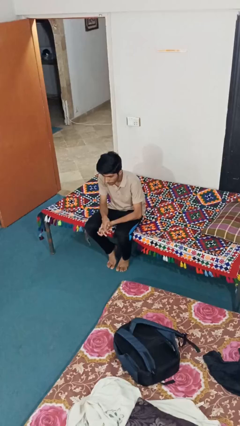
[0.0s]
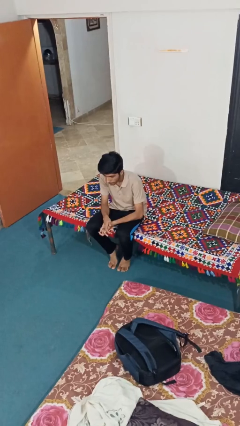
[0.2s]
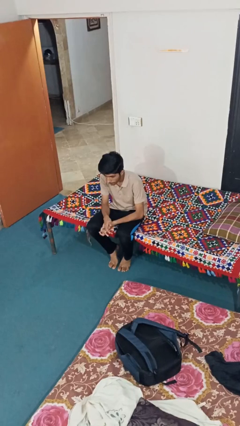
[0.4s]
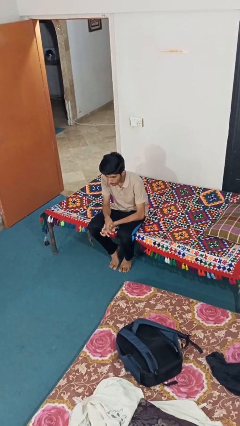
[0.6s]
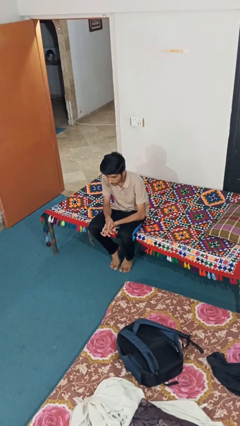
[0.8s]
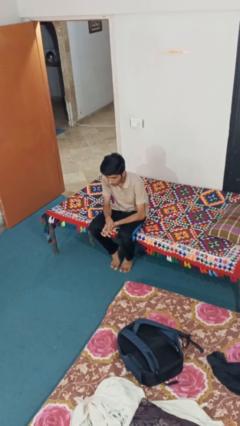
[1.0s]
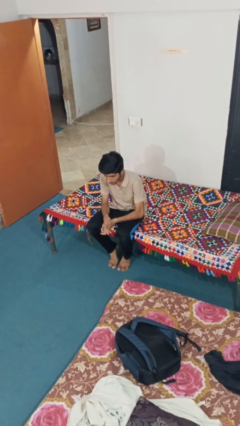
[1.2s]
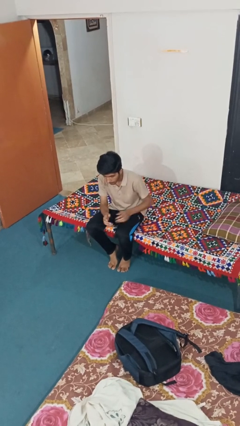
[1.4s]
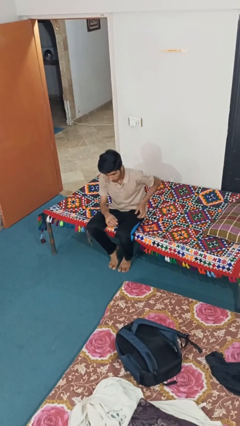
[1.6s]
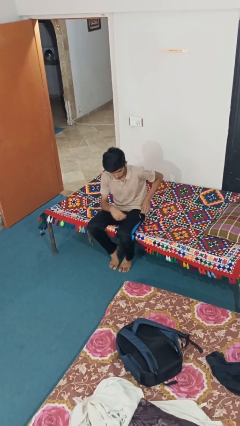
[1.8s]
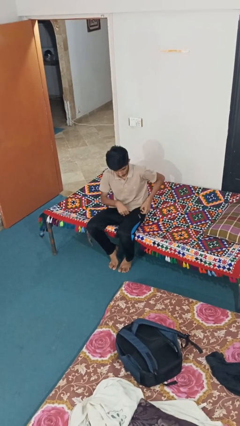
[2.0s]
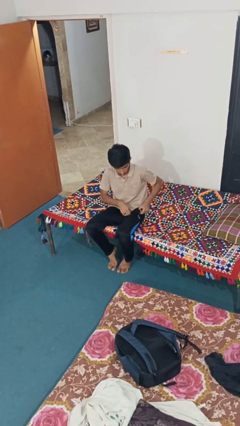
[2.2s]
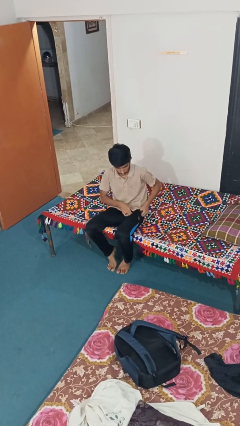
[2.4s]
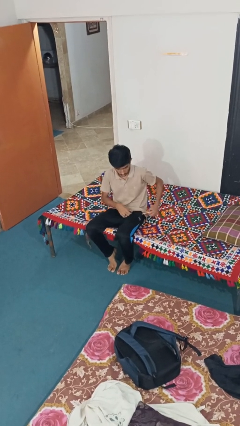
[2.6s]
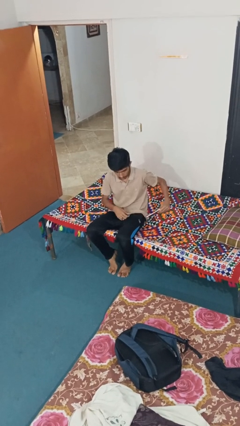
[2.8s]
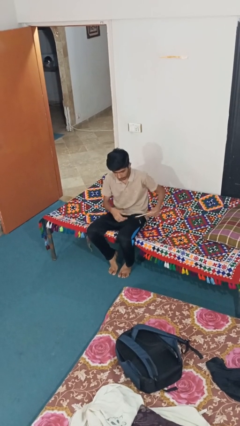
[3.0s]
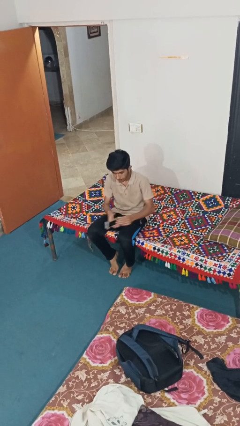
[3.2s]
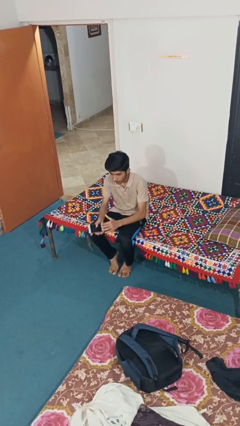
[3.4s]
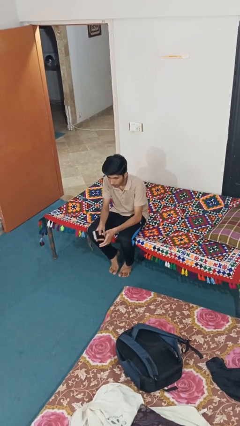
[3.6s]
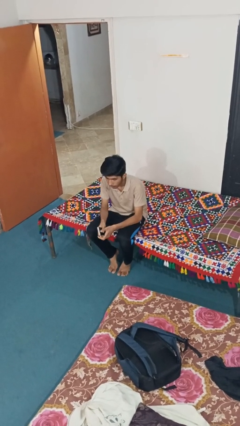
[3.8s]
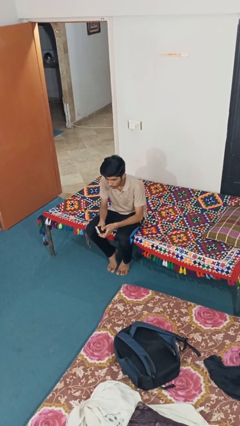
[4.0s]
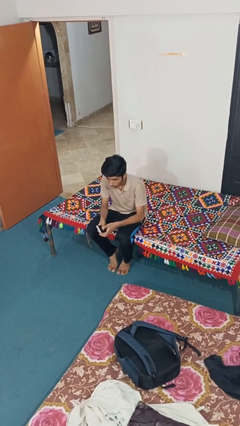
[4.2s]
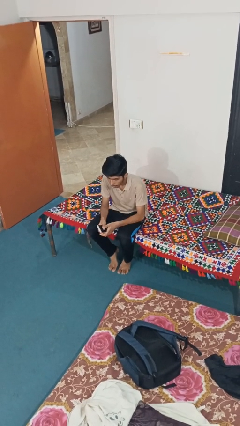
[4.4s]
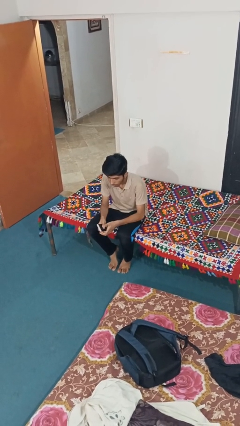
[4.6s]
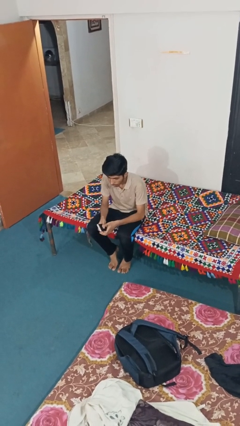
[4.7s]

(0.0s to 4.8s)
person takes phone from pocket

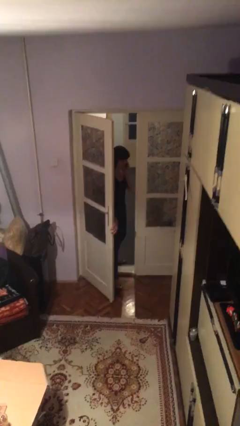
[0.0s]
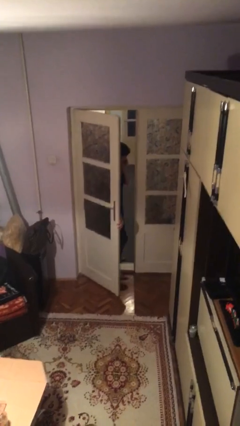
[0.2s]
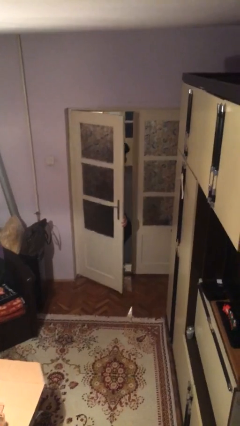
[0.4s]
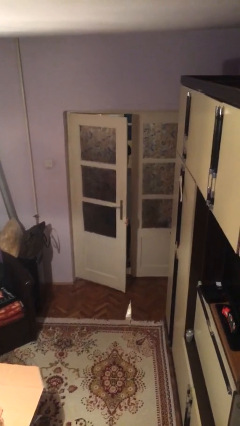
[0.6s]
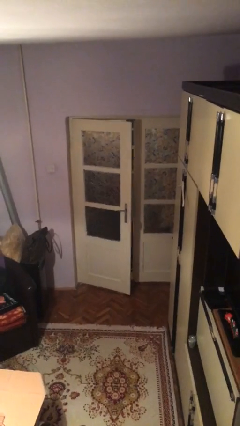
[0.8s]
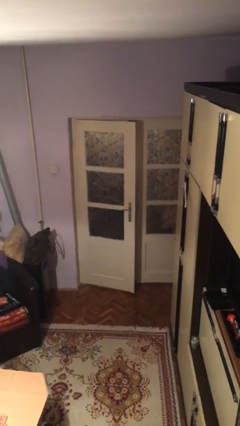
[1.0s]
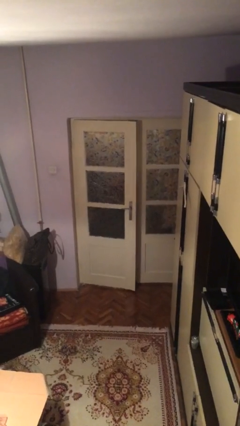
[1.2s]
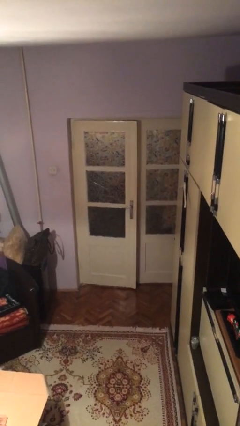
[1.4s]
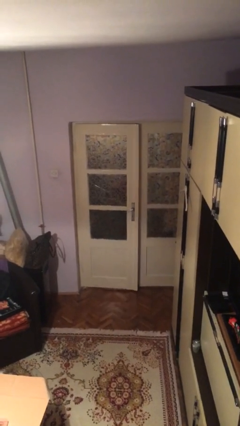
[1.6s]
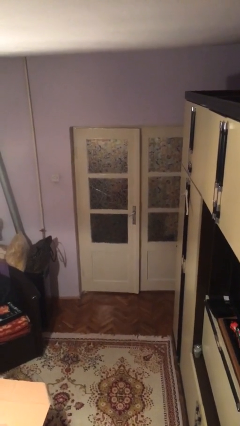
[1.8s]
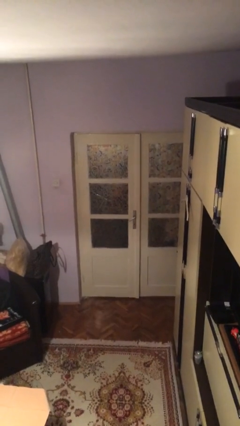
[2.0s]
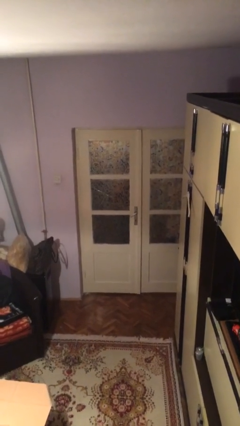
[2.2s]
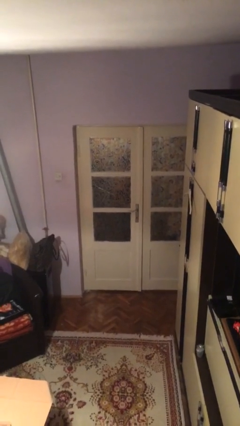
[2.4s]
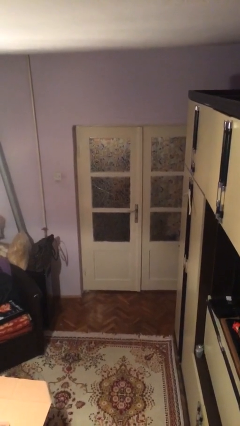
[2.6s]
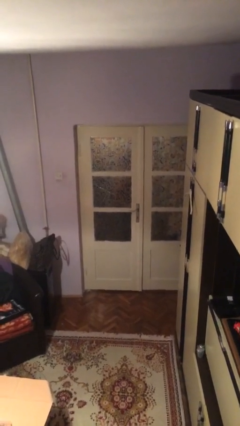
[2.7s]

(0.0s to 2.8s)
person closes facility door

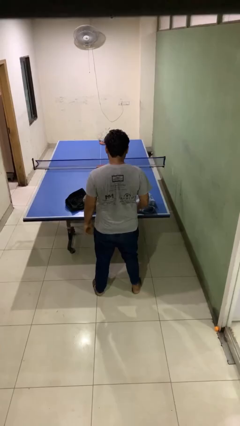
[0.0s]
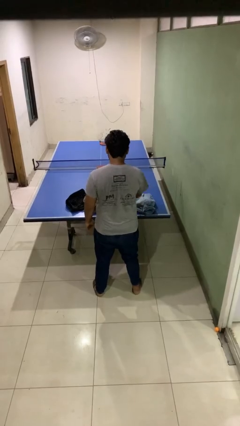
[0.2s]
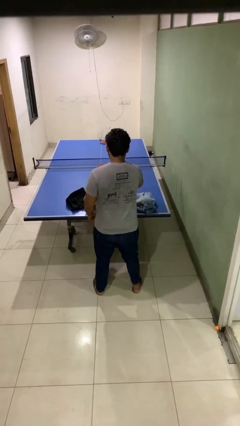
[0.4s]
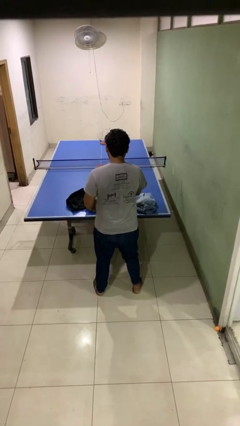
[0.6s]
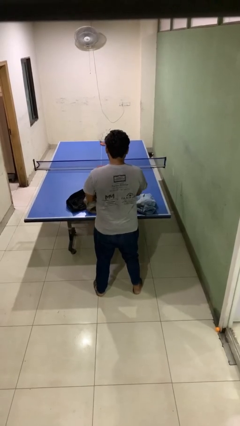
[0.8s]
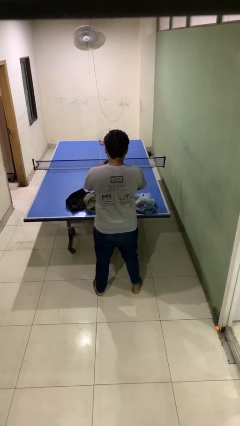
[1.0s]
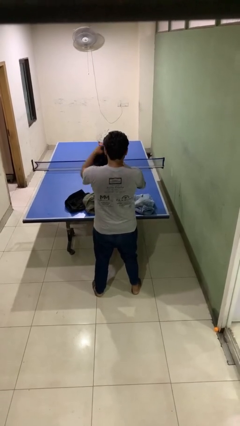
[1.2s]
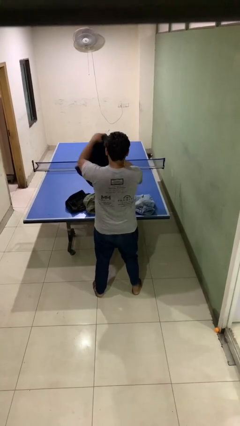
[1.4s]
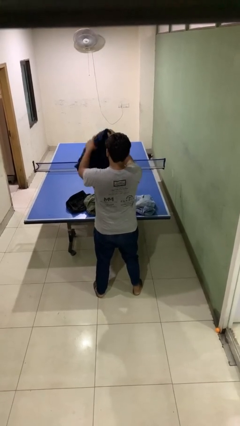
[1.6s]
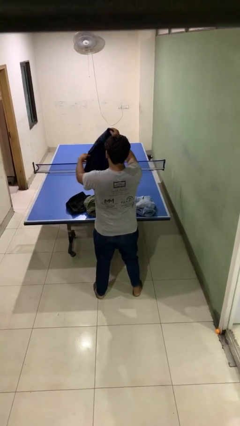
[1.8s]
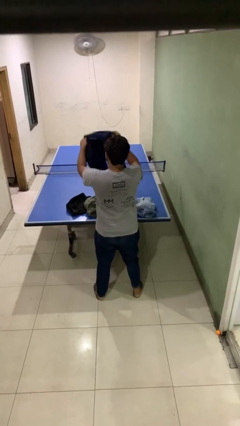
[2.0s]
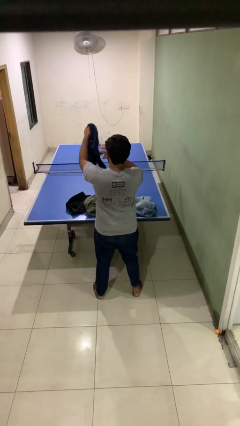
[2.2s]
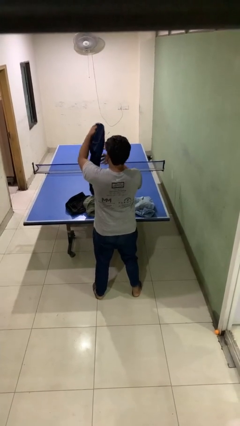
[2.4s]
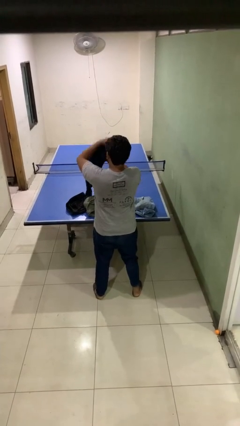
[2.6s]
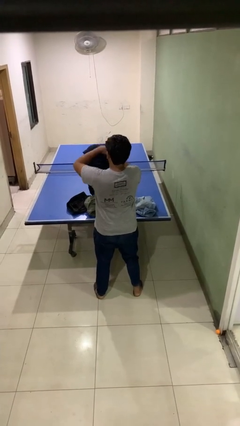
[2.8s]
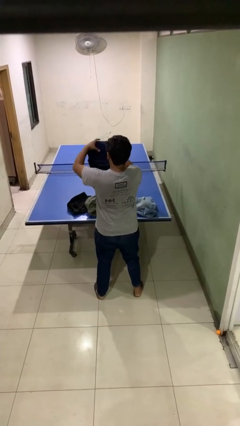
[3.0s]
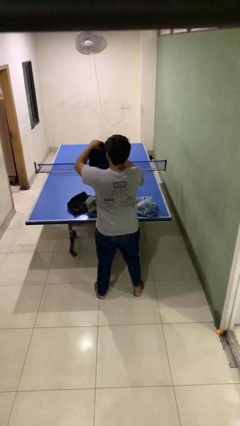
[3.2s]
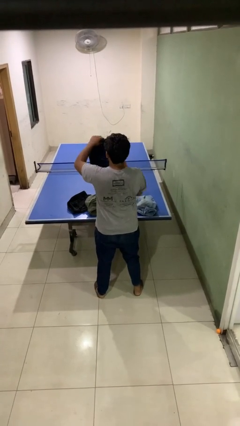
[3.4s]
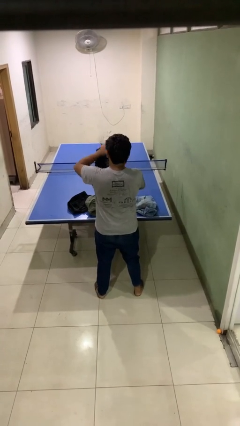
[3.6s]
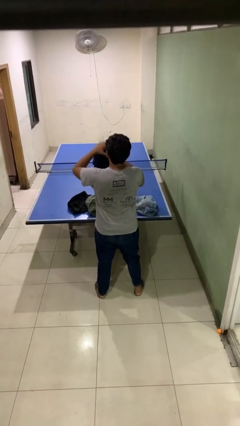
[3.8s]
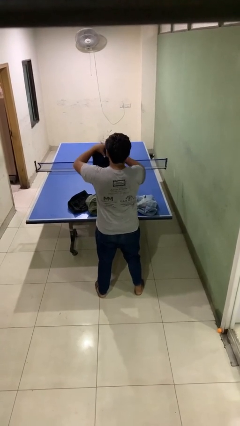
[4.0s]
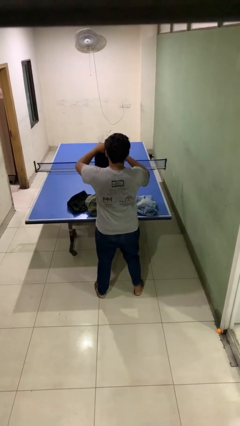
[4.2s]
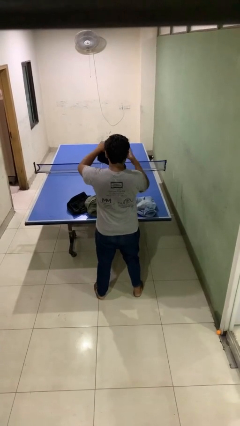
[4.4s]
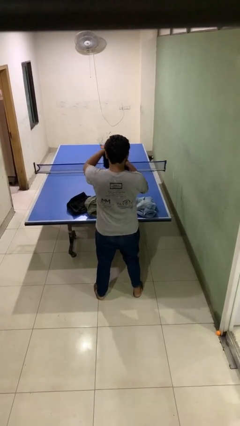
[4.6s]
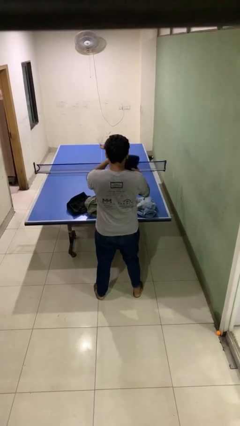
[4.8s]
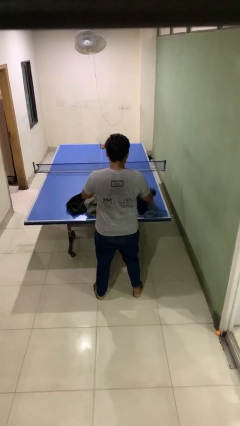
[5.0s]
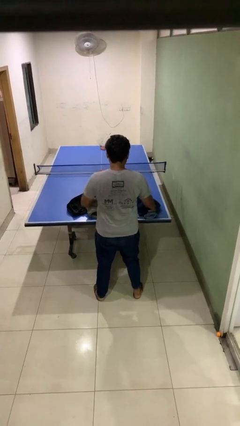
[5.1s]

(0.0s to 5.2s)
person folds pants

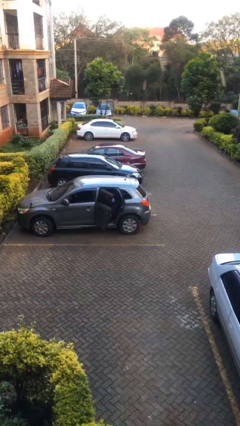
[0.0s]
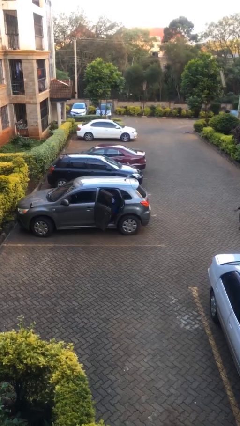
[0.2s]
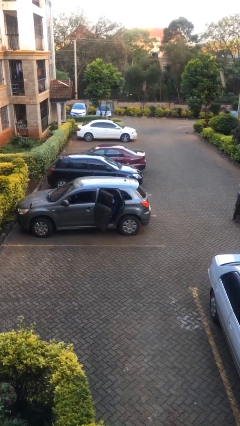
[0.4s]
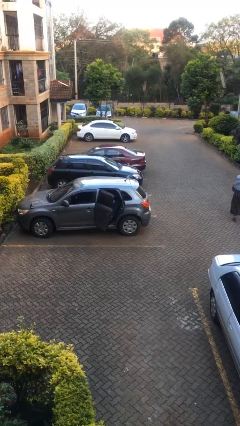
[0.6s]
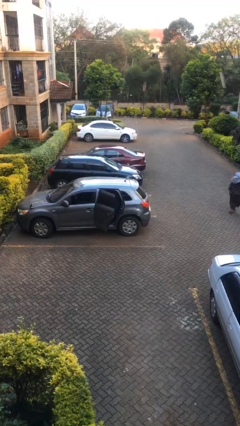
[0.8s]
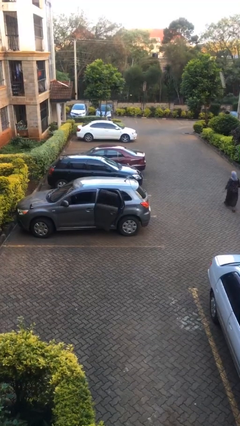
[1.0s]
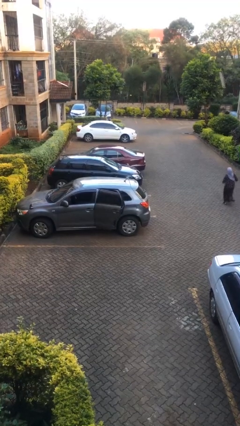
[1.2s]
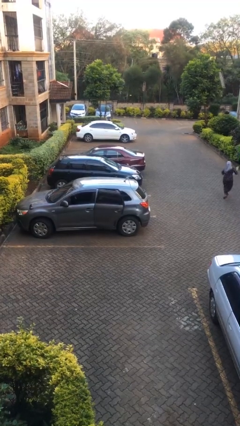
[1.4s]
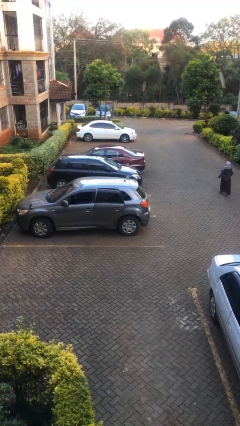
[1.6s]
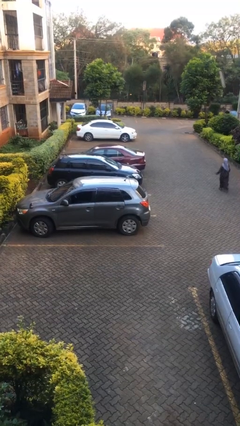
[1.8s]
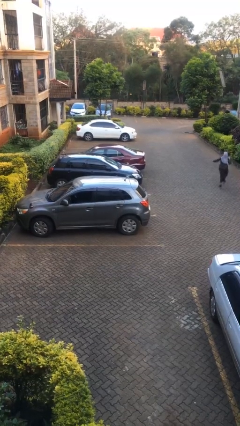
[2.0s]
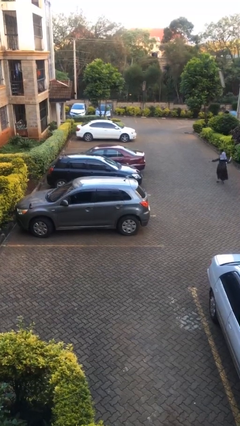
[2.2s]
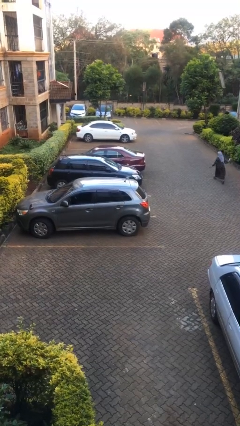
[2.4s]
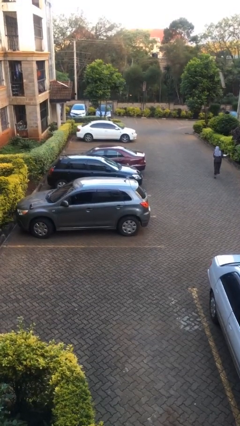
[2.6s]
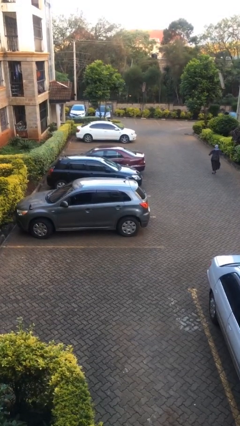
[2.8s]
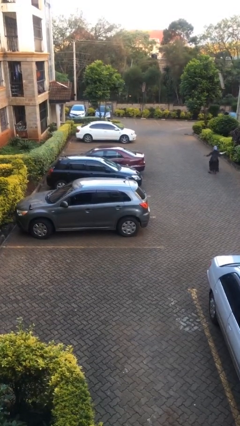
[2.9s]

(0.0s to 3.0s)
person closes car door

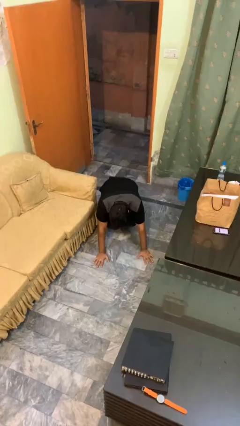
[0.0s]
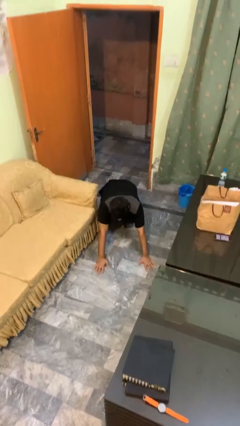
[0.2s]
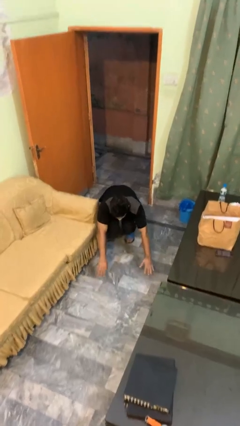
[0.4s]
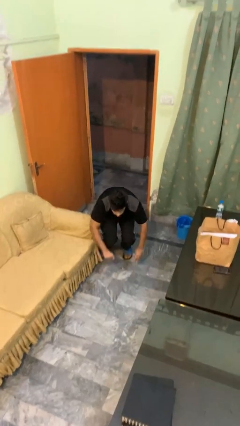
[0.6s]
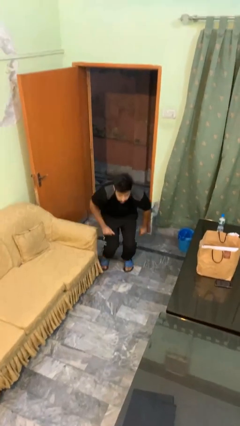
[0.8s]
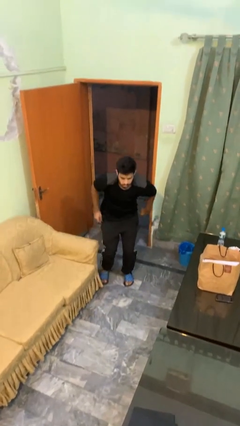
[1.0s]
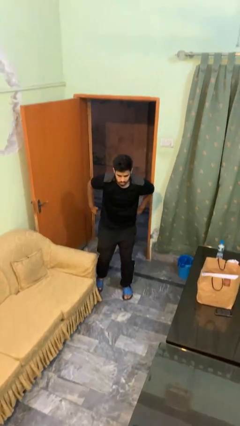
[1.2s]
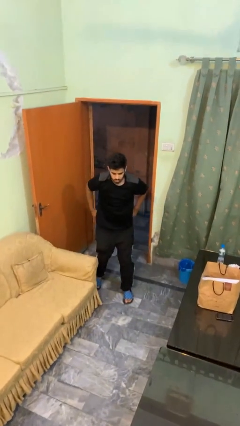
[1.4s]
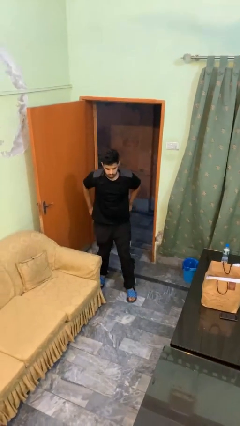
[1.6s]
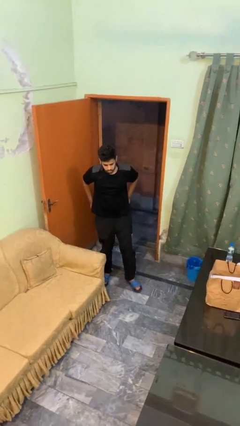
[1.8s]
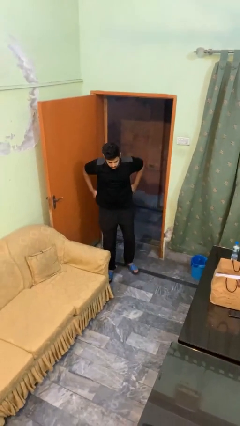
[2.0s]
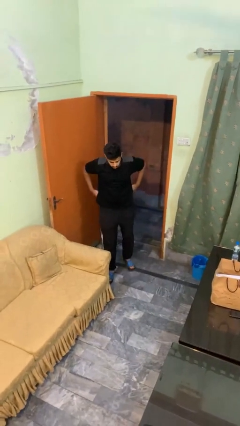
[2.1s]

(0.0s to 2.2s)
person stands up from floor
